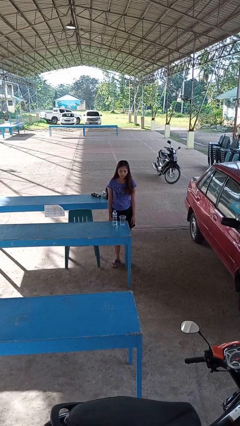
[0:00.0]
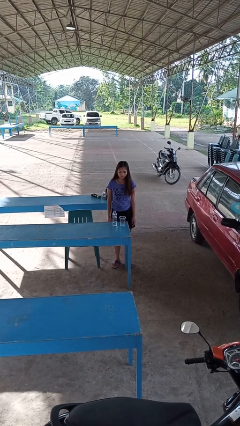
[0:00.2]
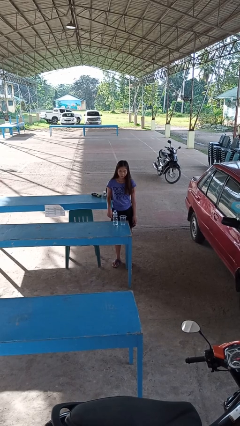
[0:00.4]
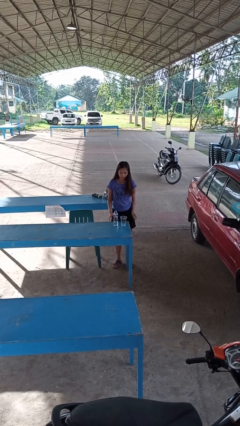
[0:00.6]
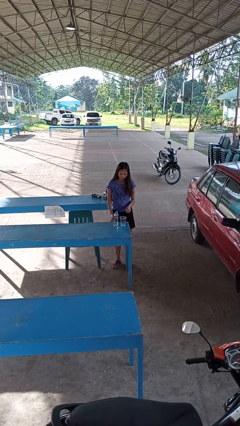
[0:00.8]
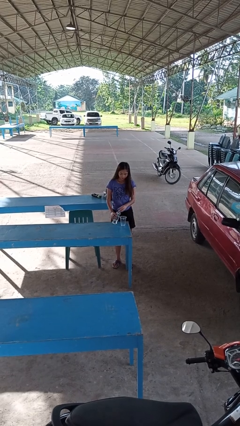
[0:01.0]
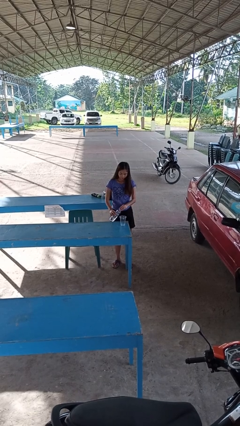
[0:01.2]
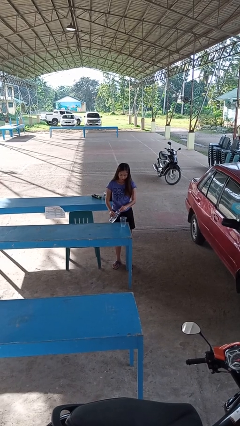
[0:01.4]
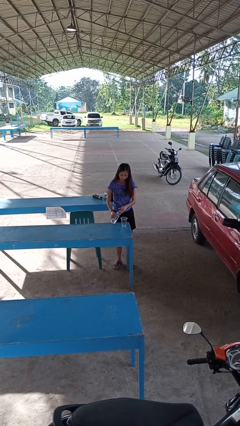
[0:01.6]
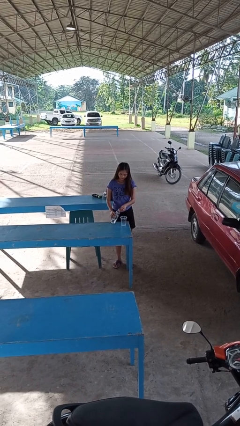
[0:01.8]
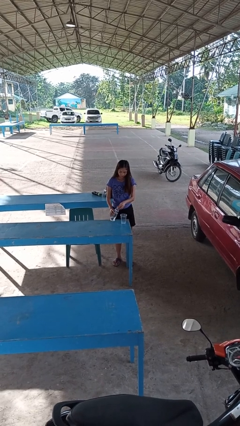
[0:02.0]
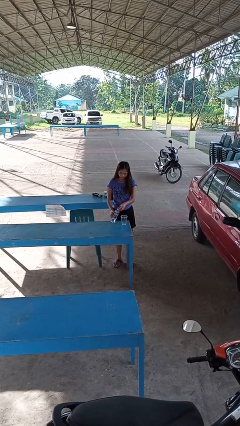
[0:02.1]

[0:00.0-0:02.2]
person unscrews lid from bottle

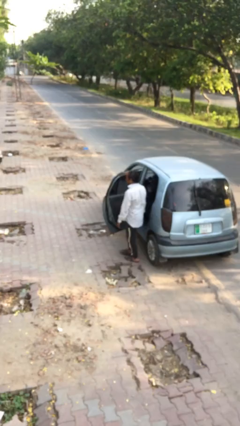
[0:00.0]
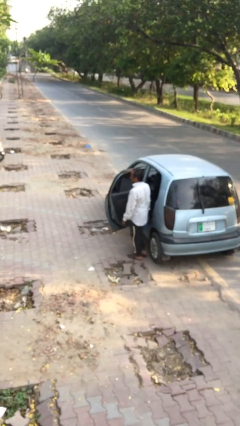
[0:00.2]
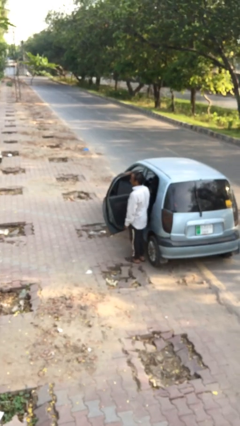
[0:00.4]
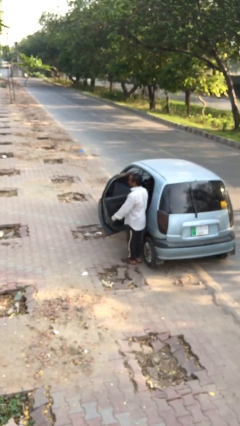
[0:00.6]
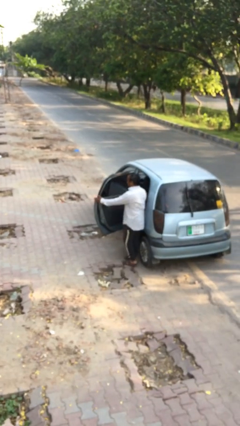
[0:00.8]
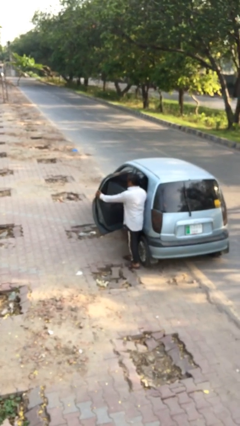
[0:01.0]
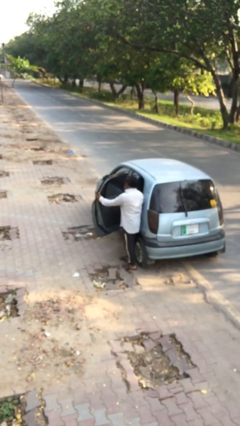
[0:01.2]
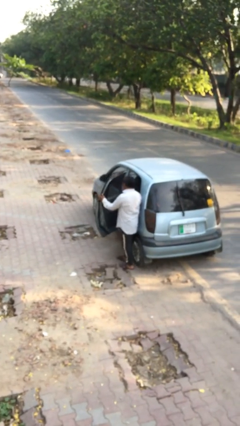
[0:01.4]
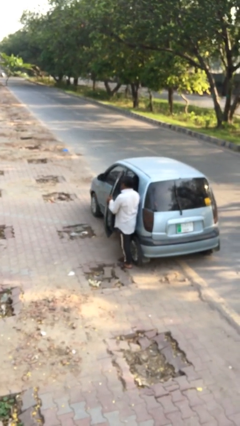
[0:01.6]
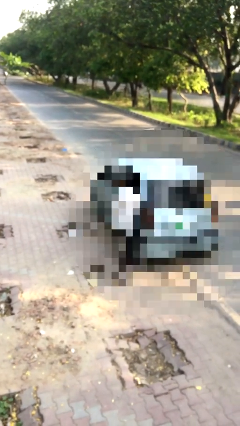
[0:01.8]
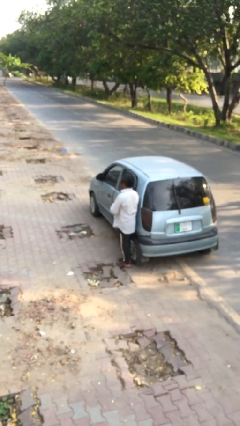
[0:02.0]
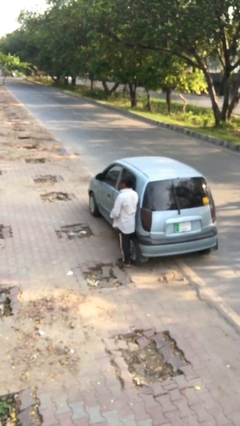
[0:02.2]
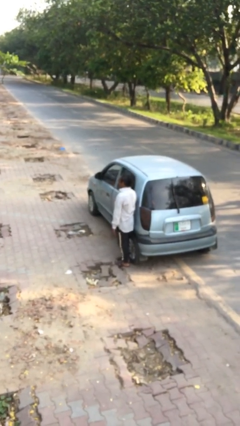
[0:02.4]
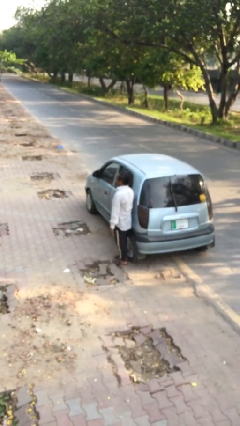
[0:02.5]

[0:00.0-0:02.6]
person closes car door

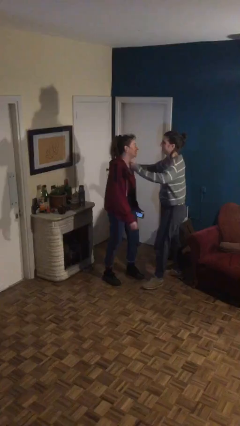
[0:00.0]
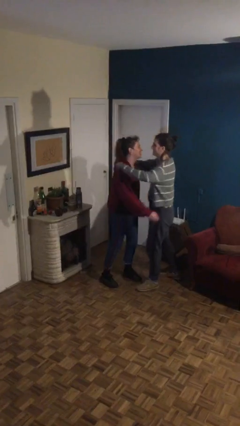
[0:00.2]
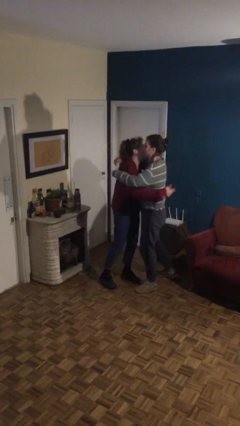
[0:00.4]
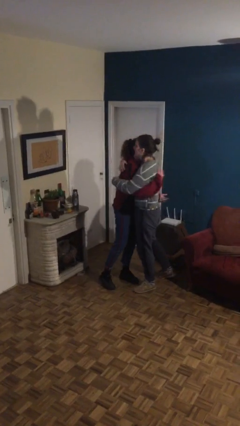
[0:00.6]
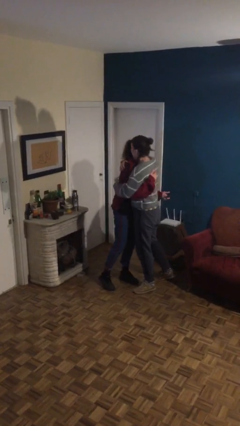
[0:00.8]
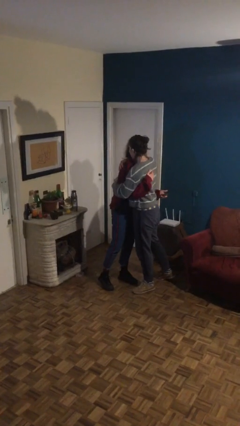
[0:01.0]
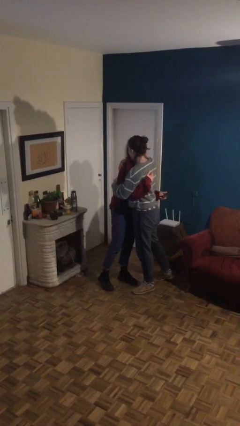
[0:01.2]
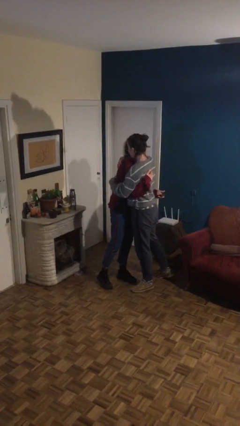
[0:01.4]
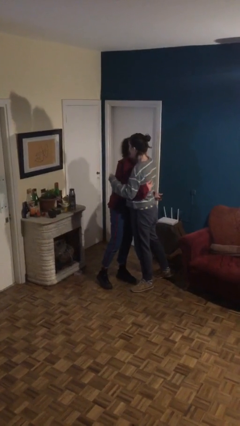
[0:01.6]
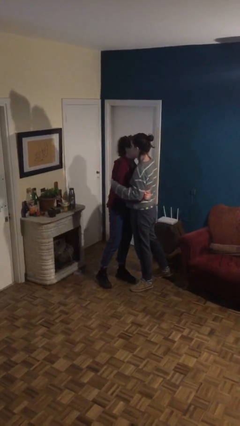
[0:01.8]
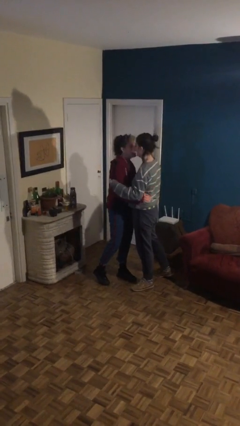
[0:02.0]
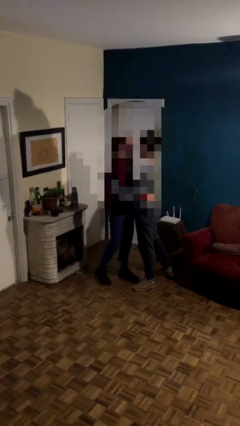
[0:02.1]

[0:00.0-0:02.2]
person embraces person

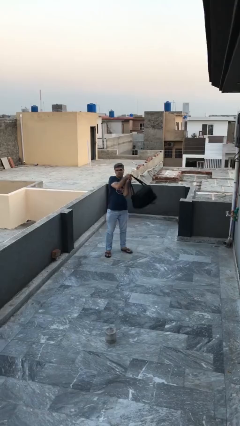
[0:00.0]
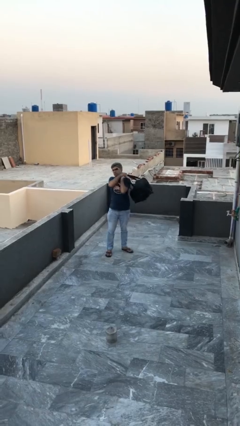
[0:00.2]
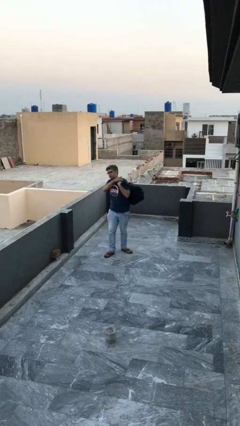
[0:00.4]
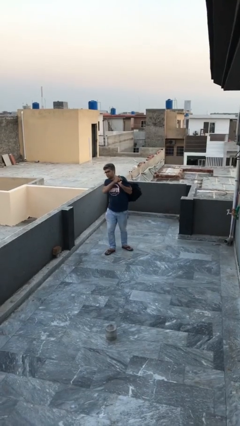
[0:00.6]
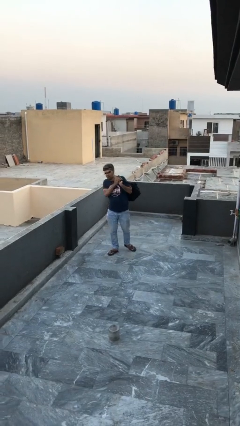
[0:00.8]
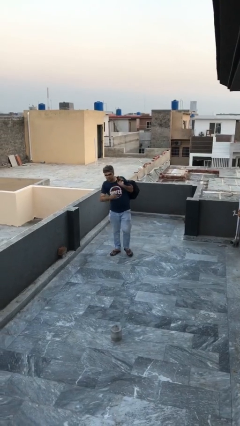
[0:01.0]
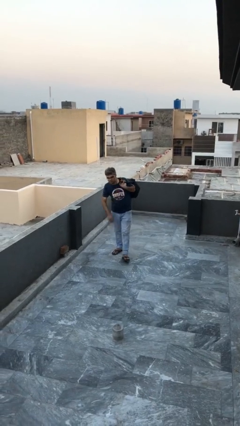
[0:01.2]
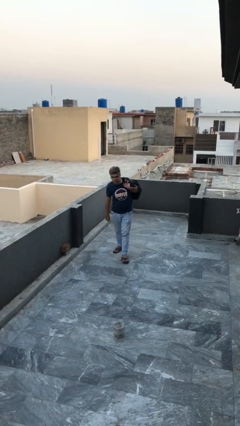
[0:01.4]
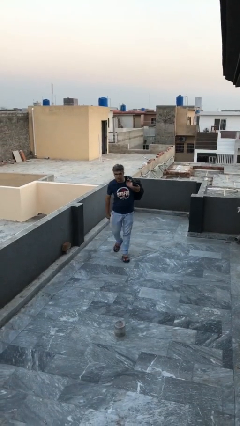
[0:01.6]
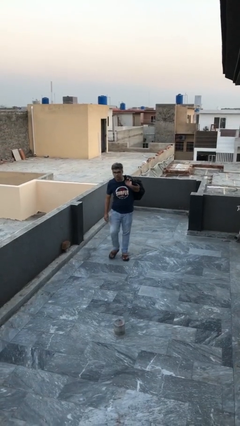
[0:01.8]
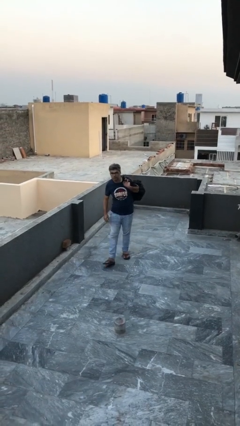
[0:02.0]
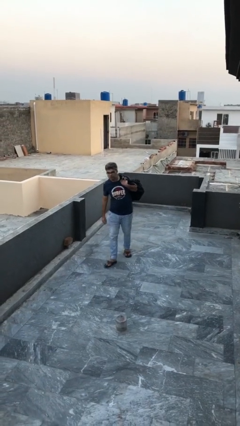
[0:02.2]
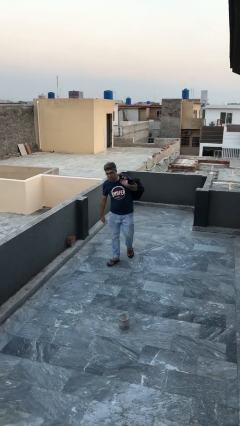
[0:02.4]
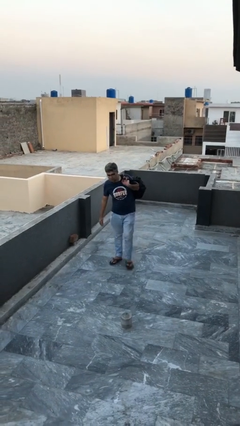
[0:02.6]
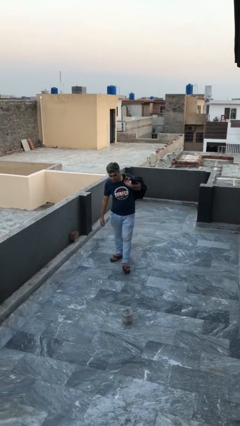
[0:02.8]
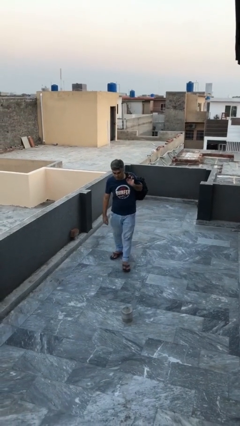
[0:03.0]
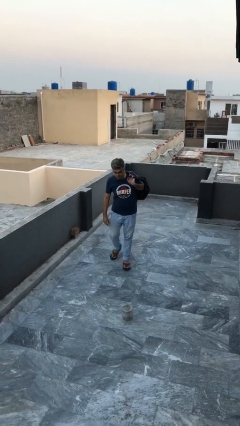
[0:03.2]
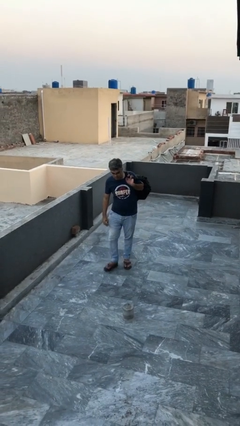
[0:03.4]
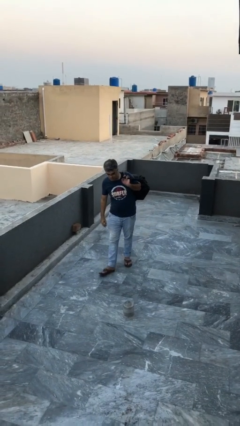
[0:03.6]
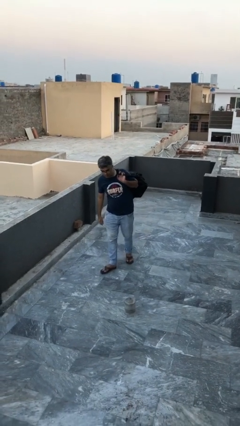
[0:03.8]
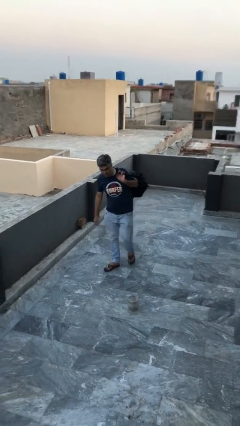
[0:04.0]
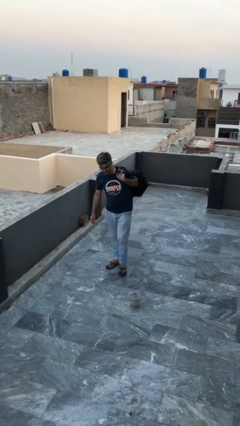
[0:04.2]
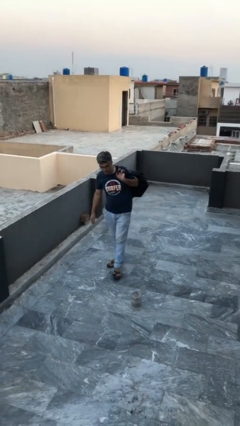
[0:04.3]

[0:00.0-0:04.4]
person carries heavy object

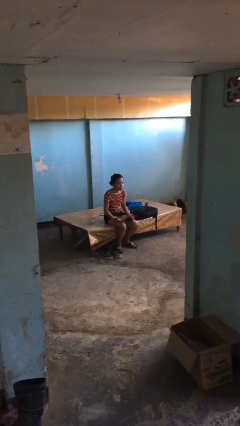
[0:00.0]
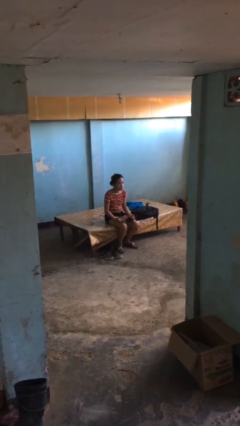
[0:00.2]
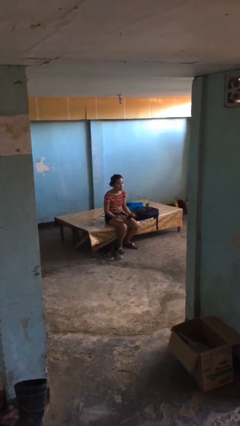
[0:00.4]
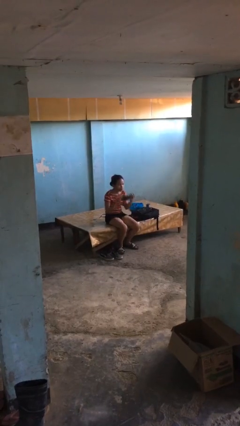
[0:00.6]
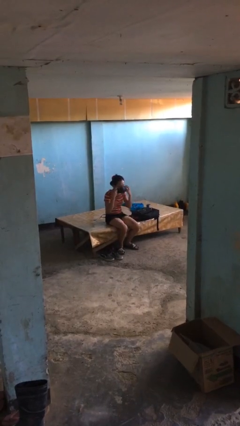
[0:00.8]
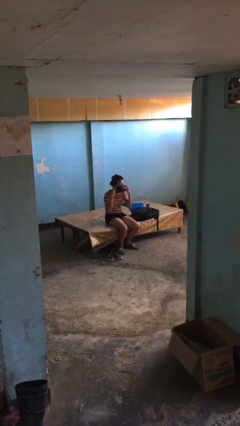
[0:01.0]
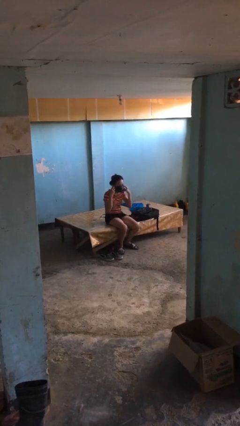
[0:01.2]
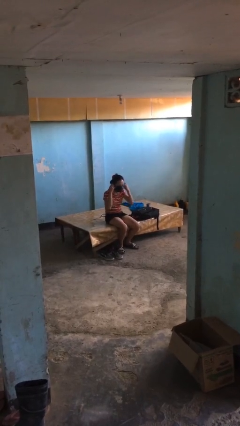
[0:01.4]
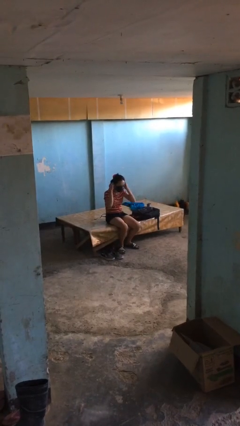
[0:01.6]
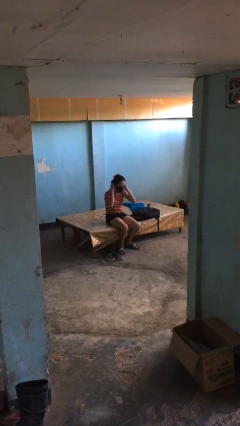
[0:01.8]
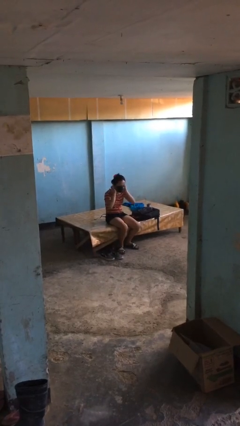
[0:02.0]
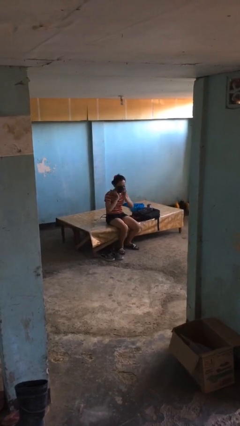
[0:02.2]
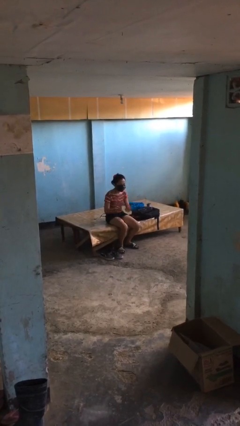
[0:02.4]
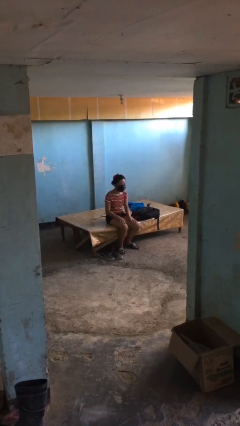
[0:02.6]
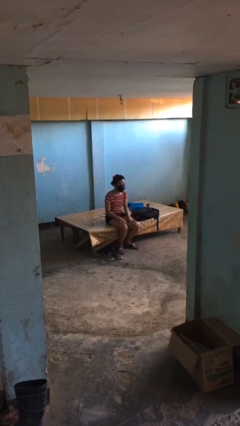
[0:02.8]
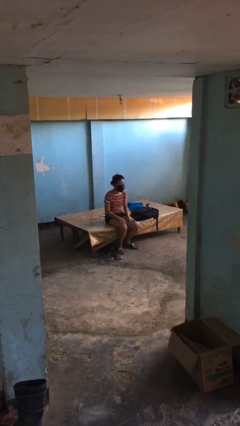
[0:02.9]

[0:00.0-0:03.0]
person puts on facemask

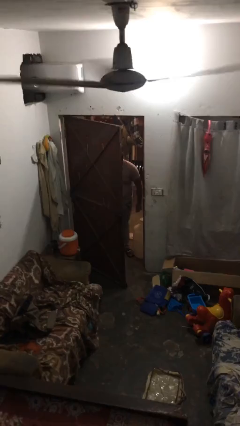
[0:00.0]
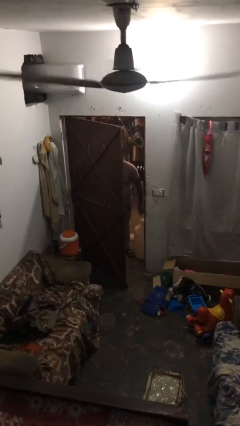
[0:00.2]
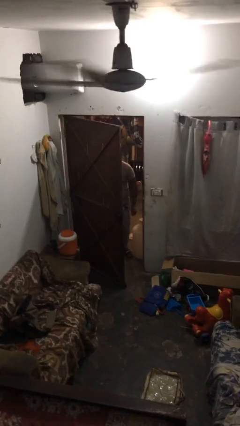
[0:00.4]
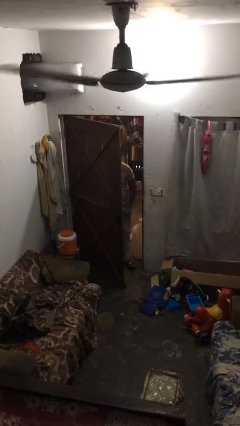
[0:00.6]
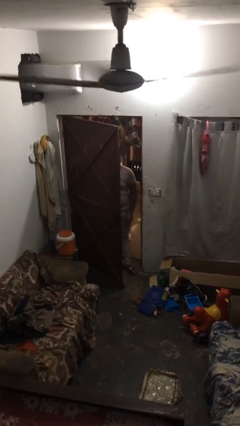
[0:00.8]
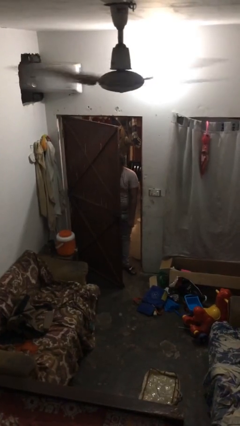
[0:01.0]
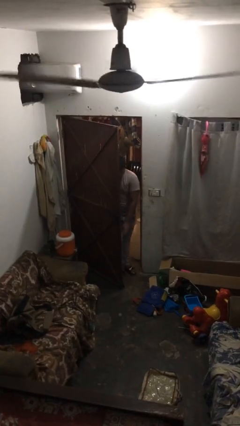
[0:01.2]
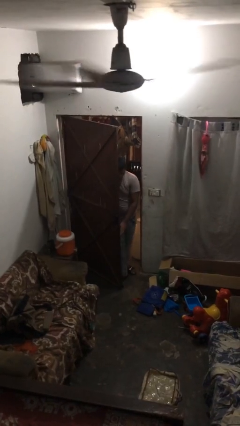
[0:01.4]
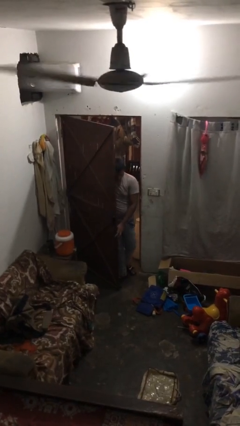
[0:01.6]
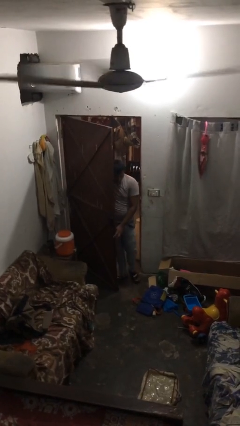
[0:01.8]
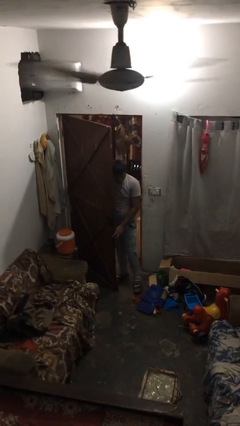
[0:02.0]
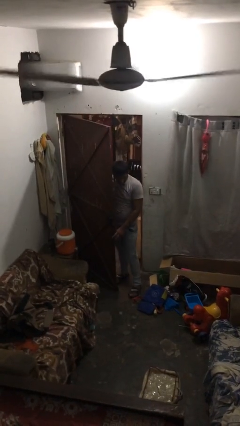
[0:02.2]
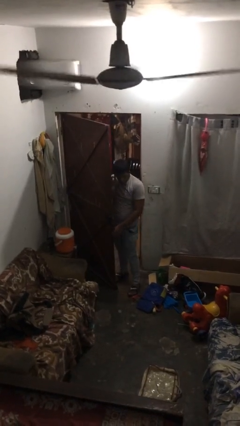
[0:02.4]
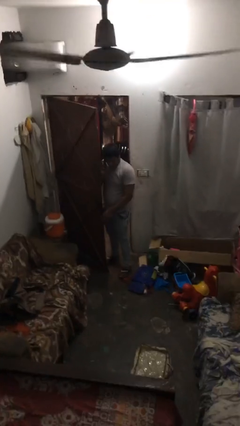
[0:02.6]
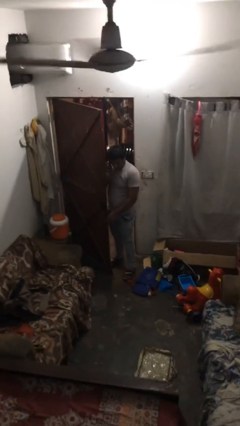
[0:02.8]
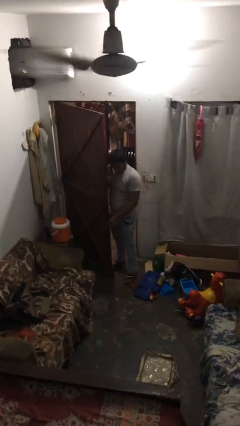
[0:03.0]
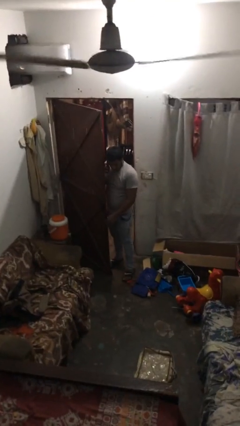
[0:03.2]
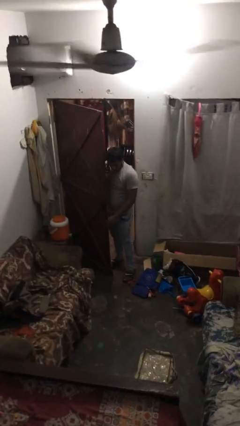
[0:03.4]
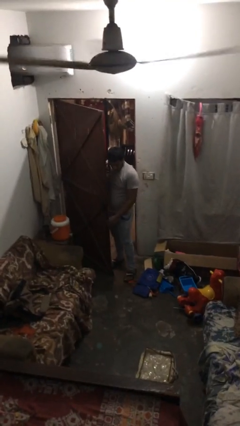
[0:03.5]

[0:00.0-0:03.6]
person enters scene through structure
